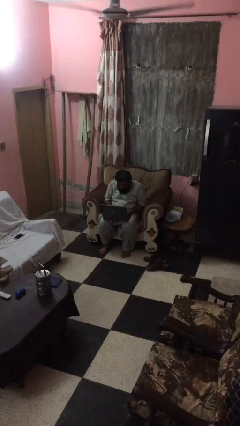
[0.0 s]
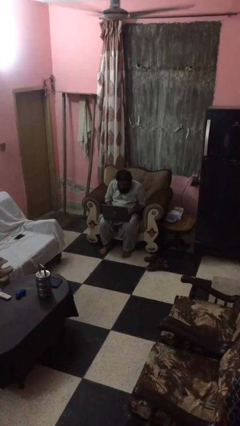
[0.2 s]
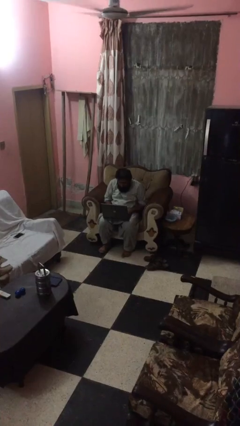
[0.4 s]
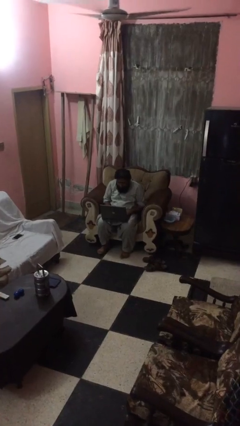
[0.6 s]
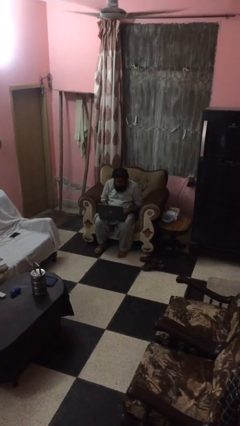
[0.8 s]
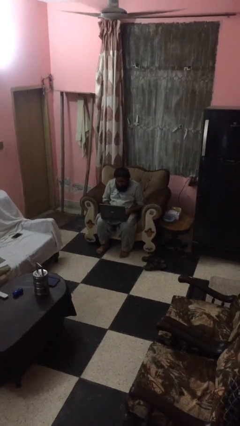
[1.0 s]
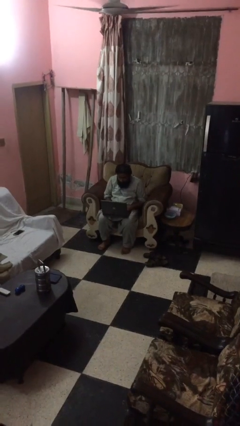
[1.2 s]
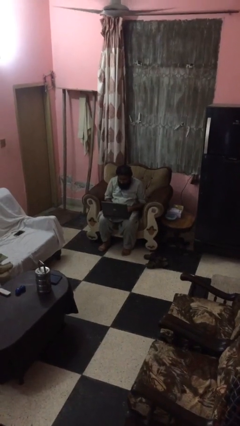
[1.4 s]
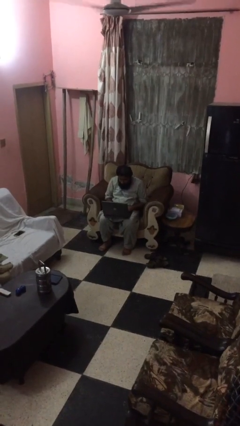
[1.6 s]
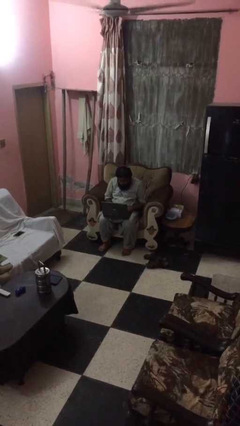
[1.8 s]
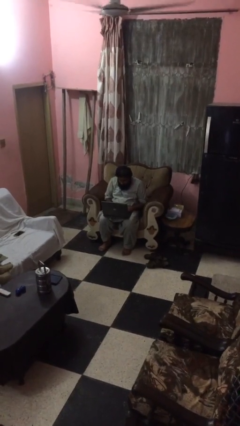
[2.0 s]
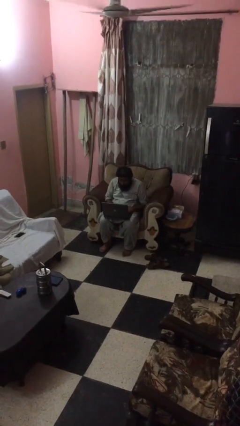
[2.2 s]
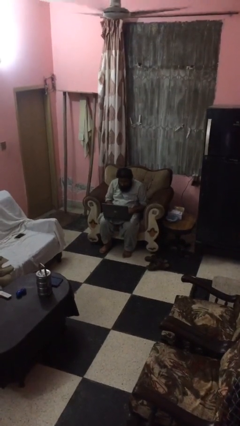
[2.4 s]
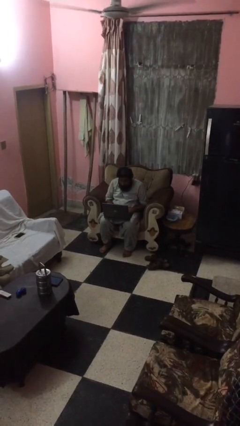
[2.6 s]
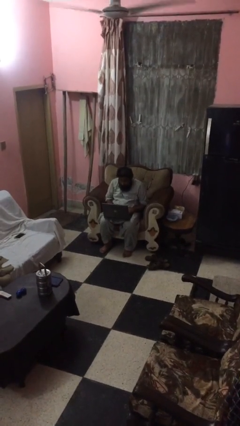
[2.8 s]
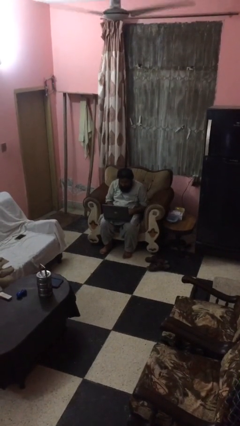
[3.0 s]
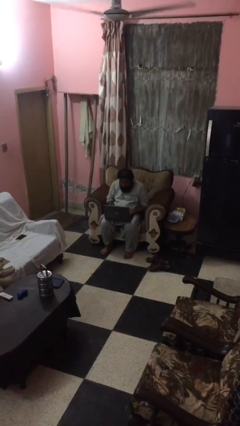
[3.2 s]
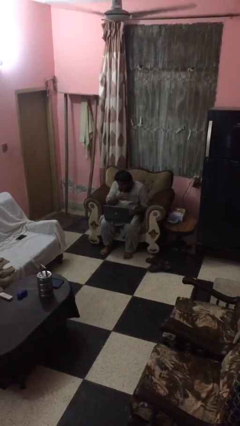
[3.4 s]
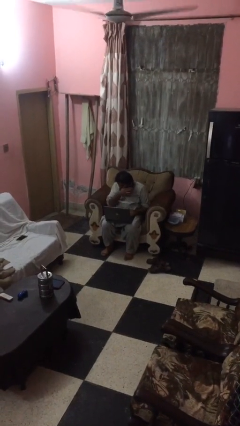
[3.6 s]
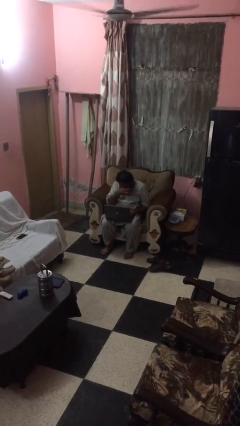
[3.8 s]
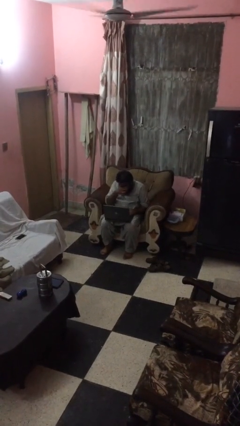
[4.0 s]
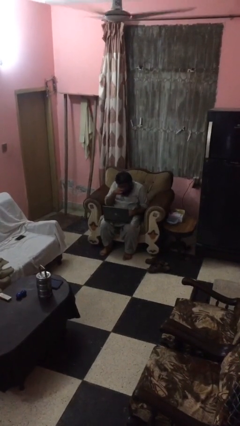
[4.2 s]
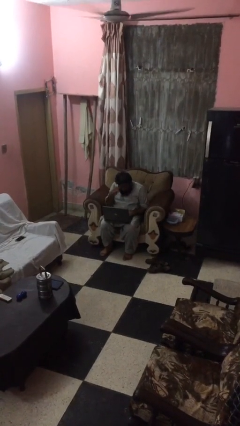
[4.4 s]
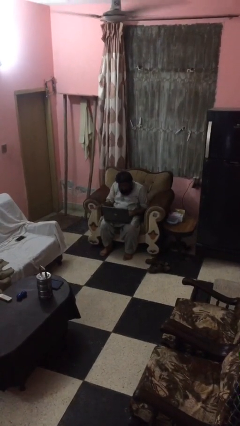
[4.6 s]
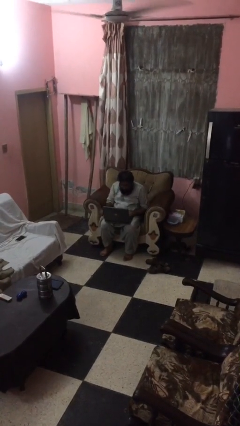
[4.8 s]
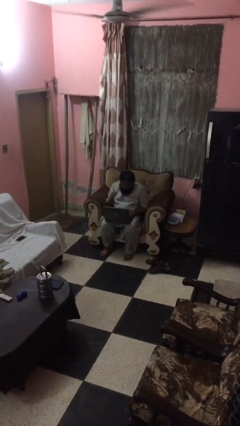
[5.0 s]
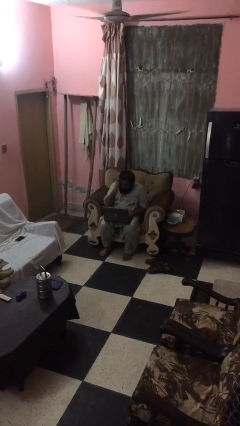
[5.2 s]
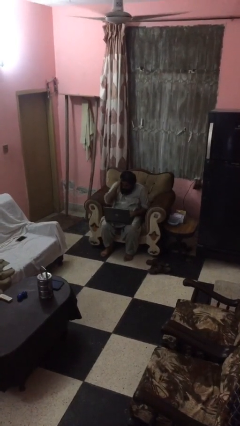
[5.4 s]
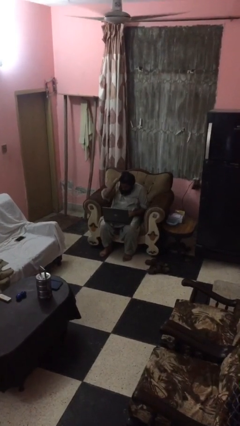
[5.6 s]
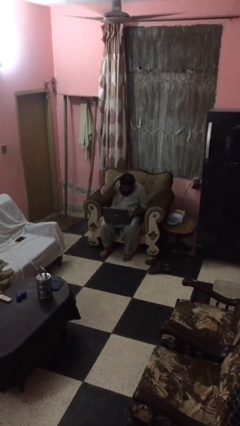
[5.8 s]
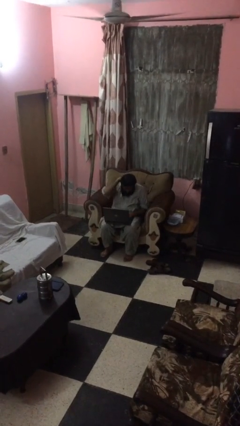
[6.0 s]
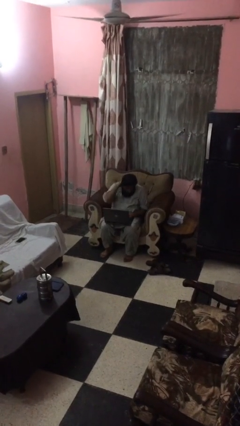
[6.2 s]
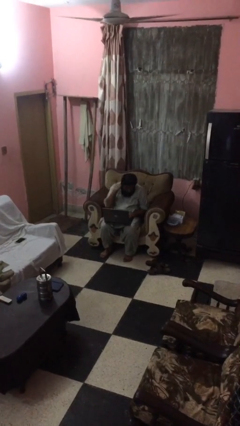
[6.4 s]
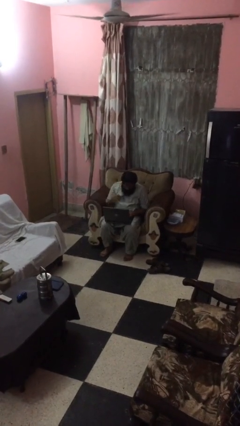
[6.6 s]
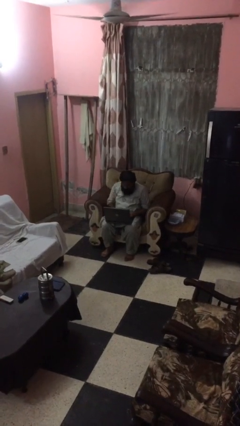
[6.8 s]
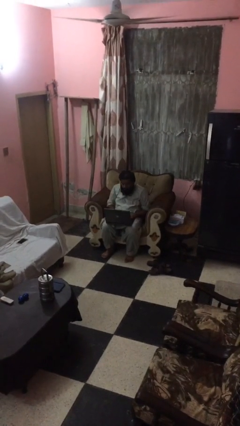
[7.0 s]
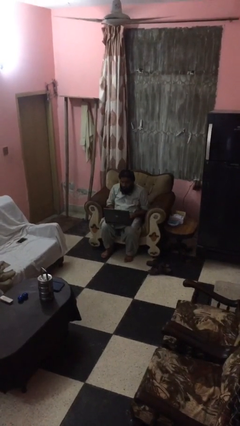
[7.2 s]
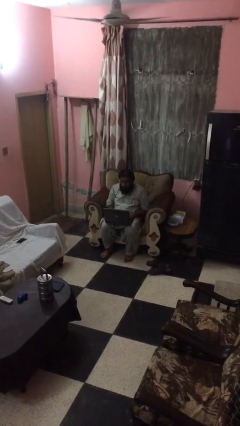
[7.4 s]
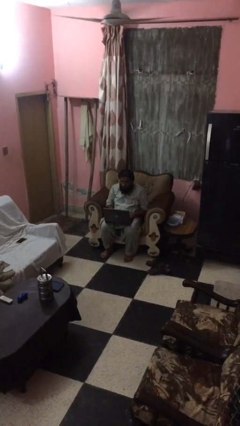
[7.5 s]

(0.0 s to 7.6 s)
person interacts with laptop

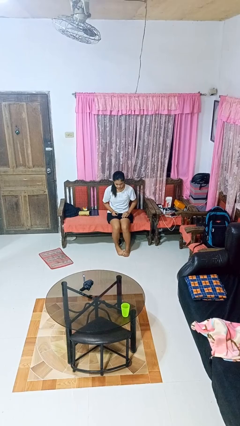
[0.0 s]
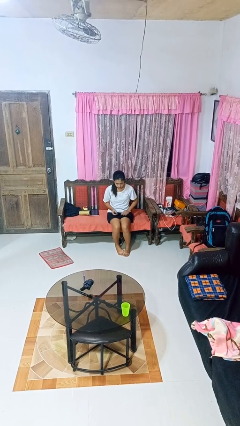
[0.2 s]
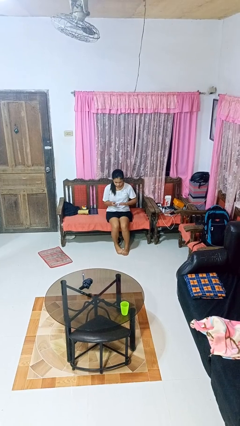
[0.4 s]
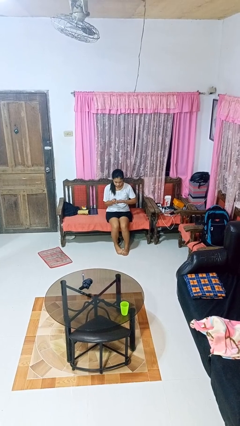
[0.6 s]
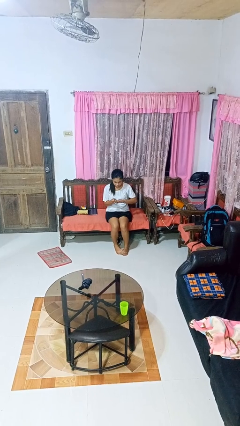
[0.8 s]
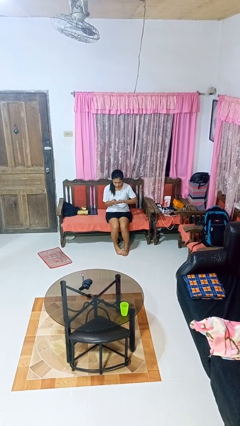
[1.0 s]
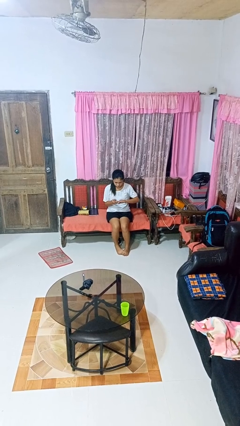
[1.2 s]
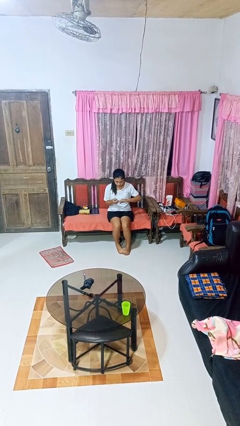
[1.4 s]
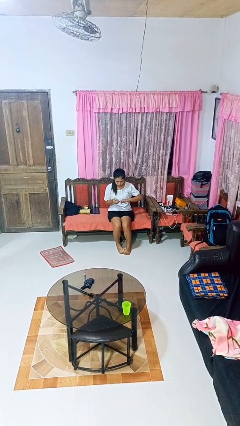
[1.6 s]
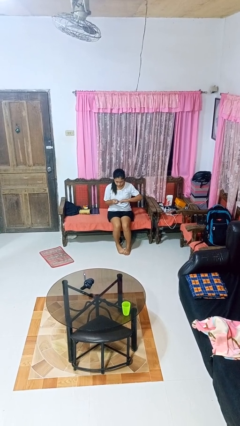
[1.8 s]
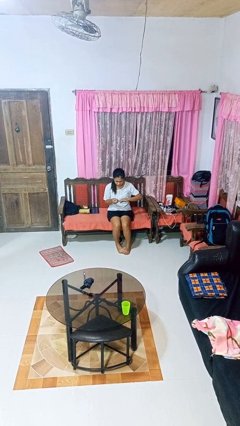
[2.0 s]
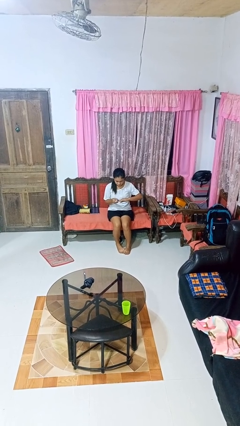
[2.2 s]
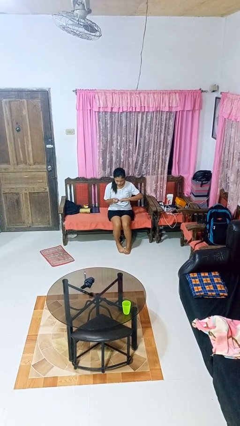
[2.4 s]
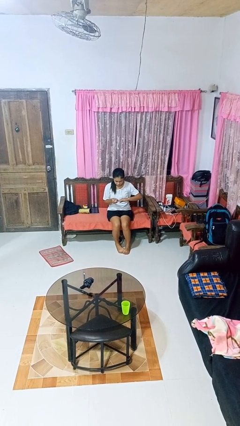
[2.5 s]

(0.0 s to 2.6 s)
person clips fingernails

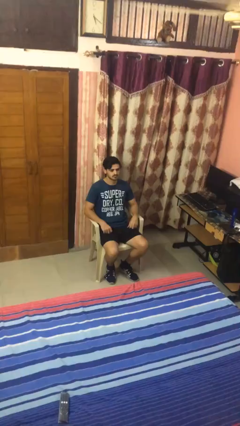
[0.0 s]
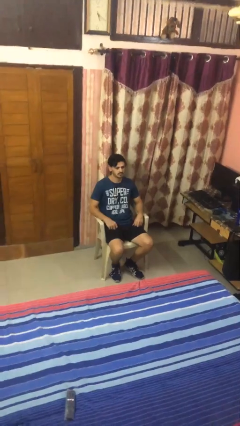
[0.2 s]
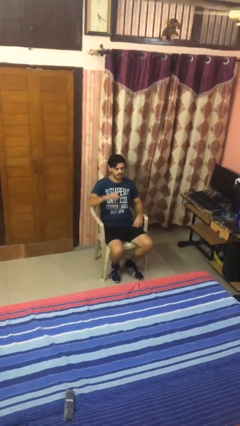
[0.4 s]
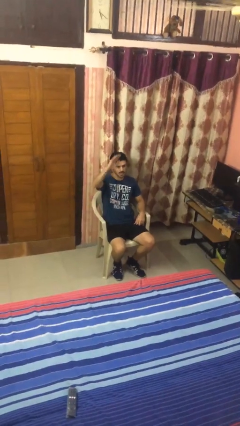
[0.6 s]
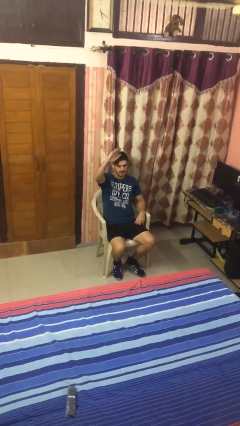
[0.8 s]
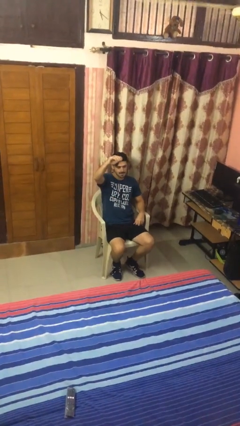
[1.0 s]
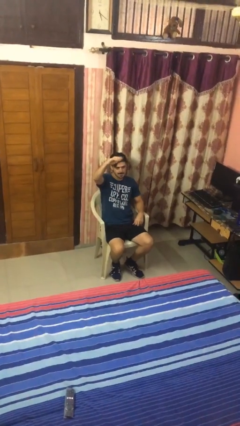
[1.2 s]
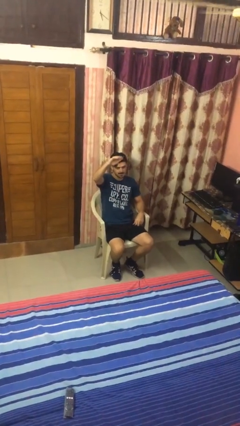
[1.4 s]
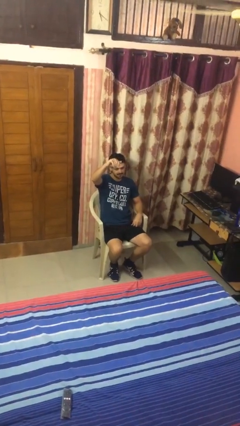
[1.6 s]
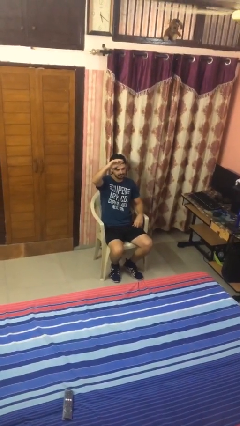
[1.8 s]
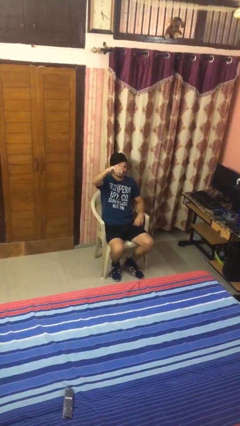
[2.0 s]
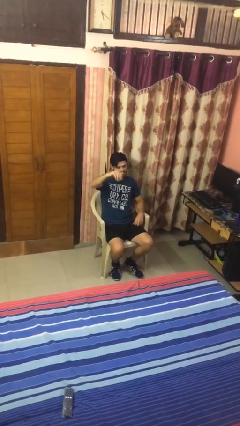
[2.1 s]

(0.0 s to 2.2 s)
person gestures come here

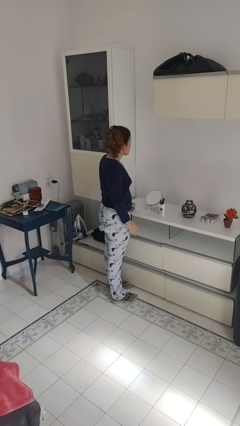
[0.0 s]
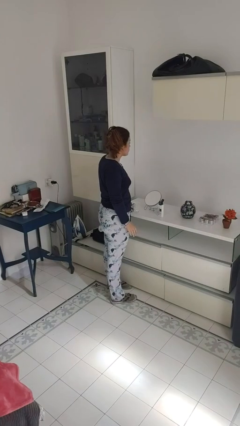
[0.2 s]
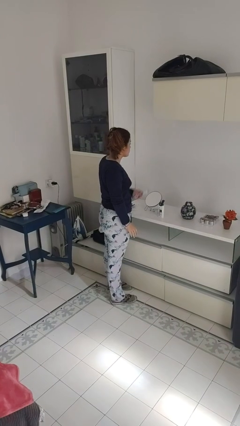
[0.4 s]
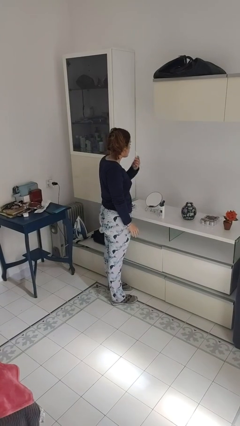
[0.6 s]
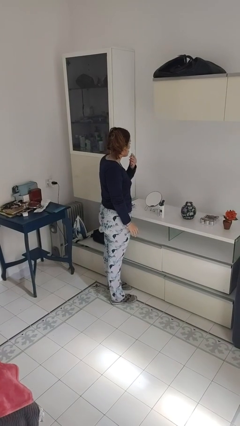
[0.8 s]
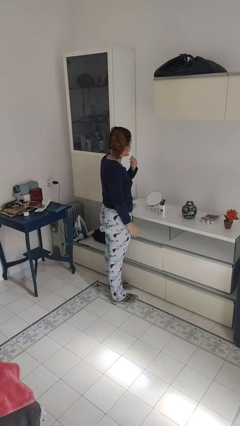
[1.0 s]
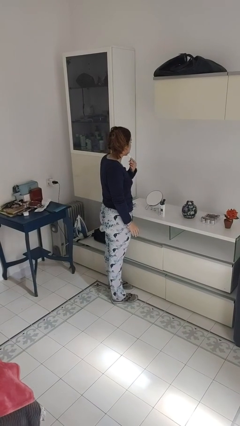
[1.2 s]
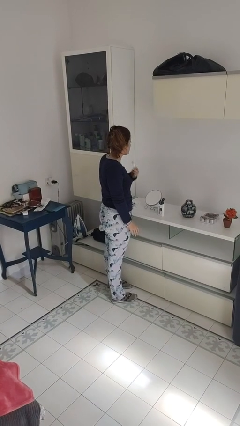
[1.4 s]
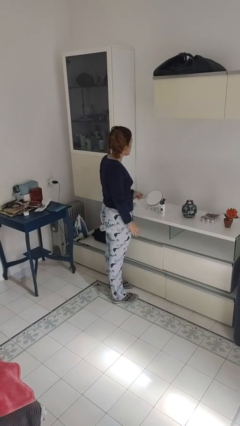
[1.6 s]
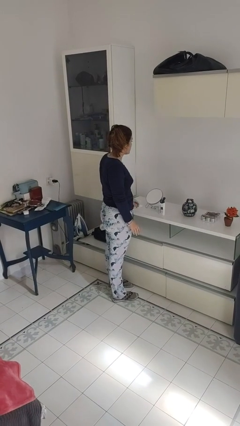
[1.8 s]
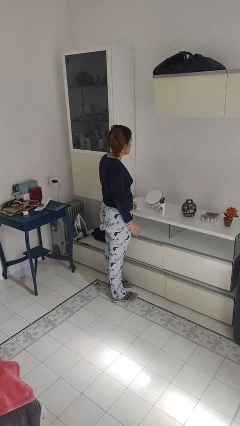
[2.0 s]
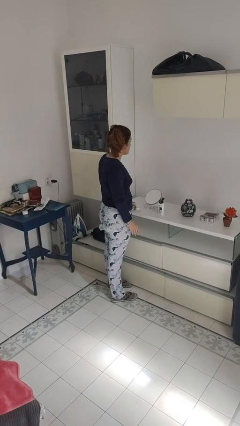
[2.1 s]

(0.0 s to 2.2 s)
person shaves face

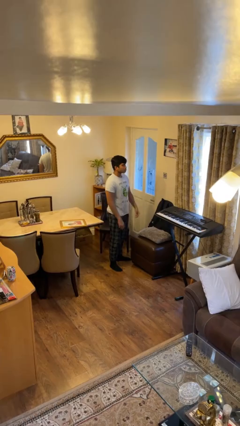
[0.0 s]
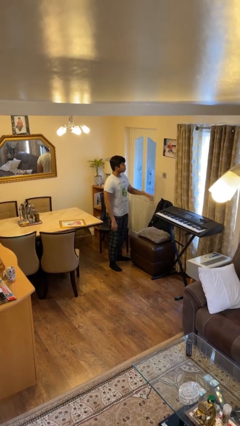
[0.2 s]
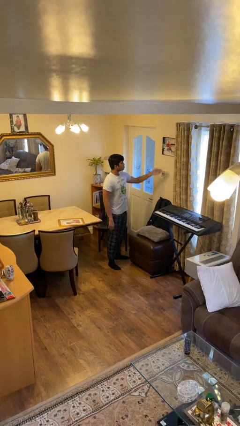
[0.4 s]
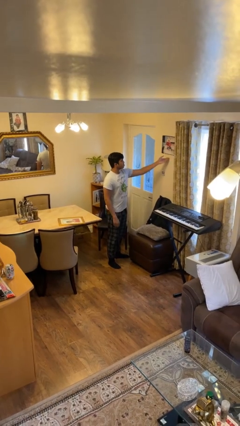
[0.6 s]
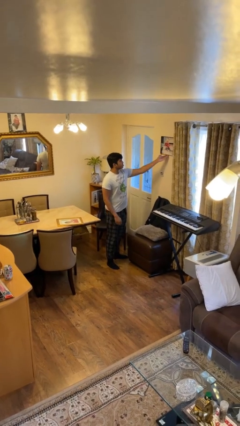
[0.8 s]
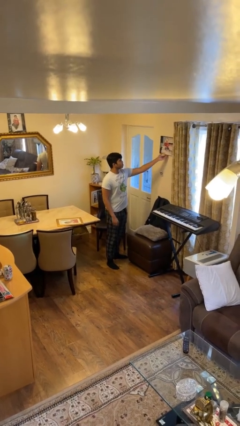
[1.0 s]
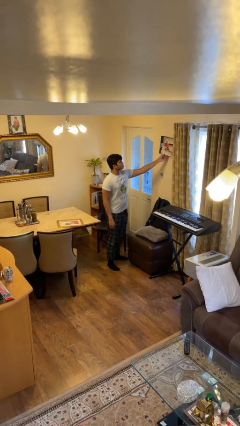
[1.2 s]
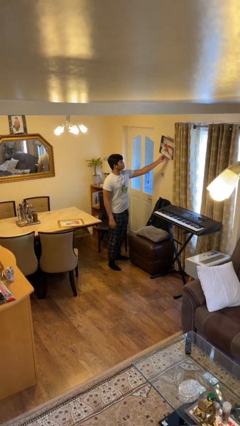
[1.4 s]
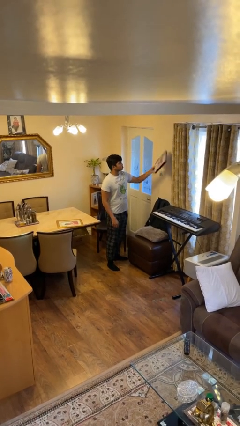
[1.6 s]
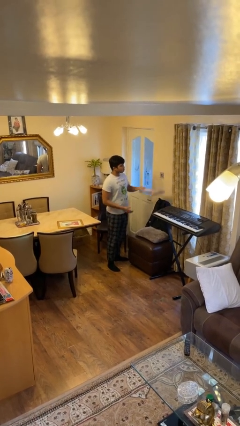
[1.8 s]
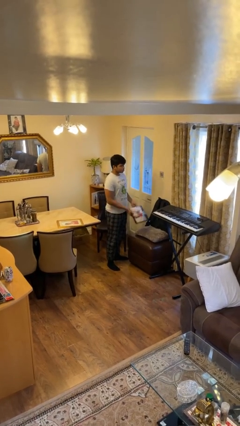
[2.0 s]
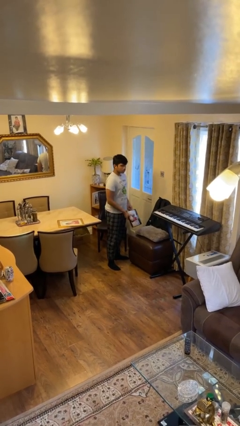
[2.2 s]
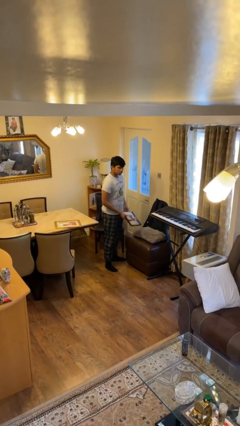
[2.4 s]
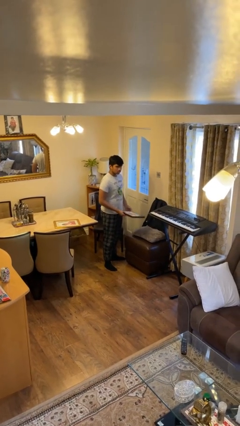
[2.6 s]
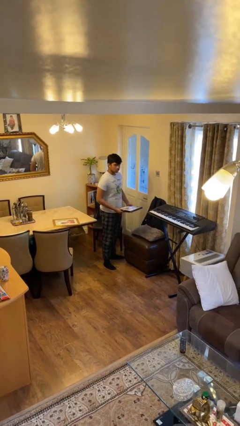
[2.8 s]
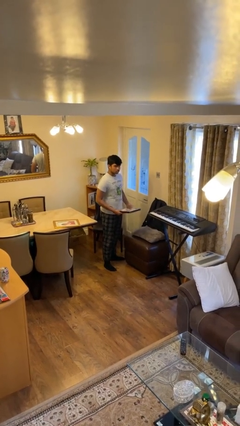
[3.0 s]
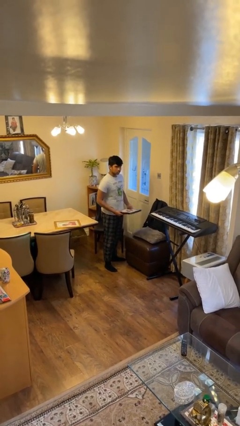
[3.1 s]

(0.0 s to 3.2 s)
person puts up picture frame
